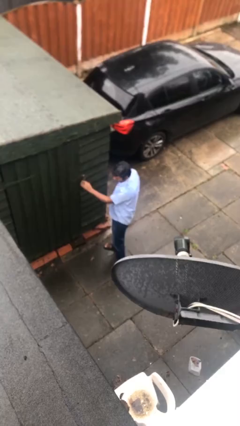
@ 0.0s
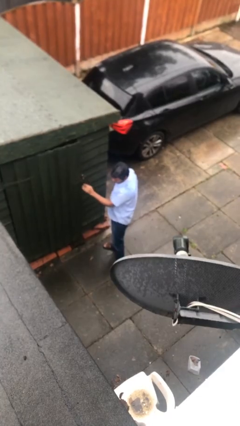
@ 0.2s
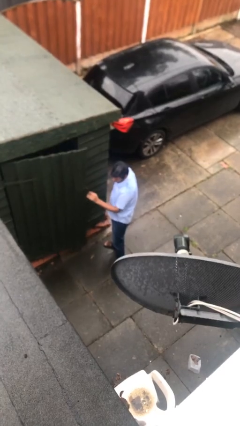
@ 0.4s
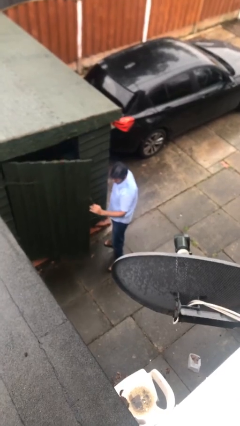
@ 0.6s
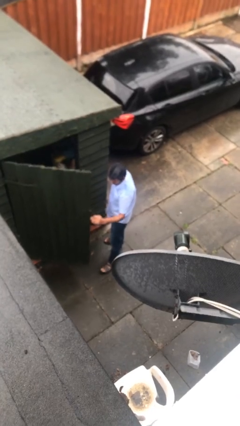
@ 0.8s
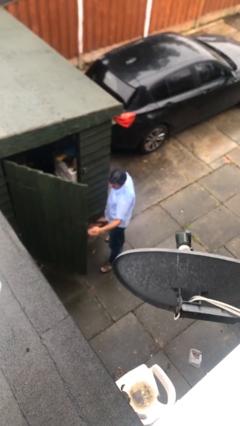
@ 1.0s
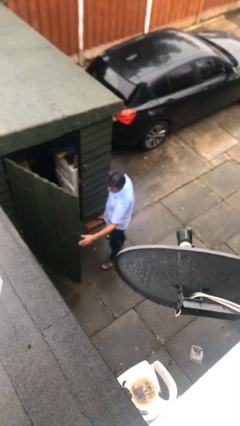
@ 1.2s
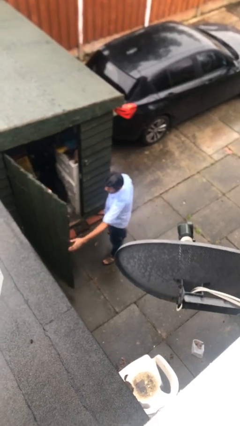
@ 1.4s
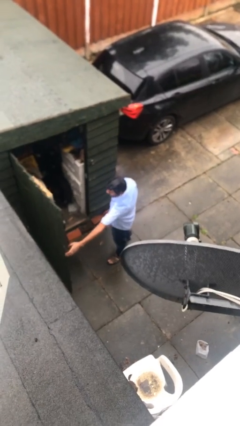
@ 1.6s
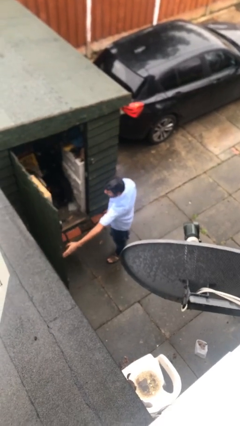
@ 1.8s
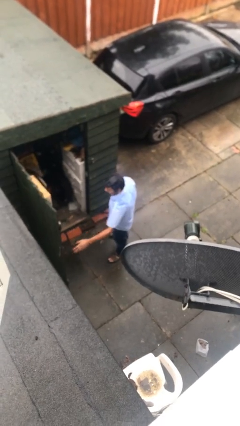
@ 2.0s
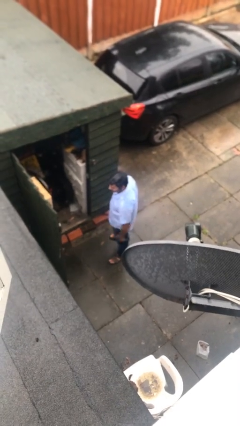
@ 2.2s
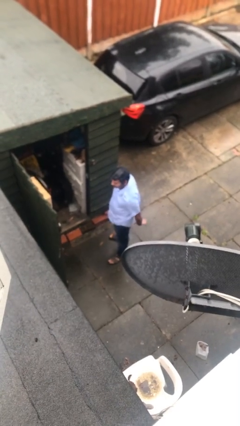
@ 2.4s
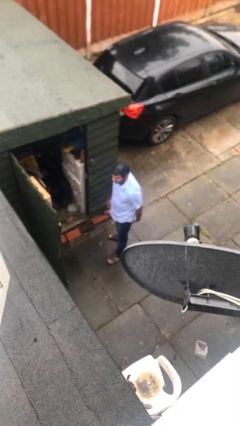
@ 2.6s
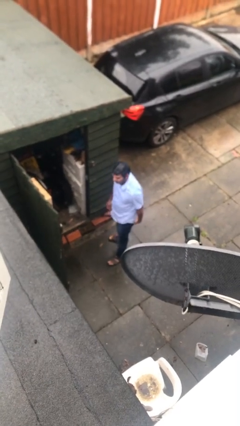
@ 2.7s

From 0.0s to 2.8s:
person opens facility door

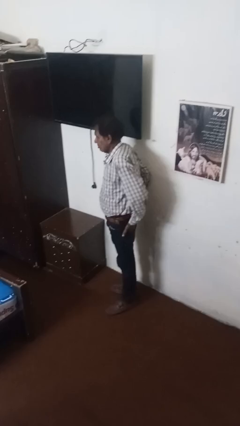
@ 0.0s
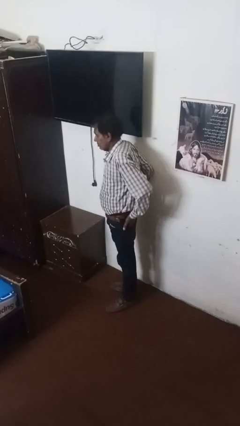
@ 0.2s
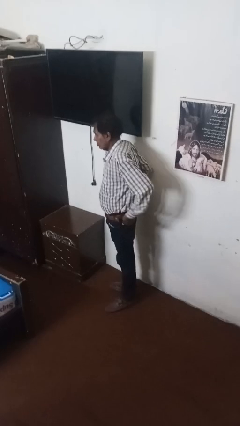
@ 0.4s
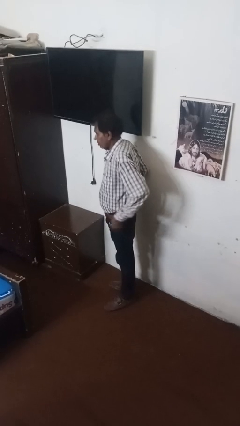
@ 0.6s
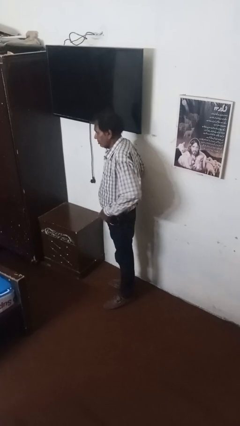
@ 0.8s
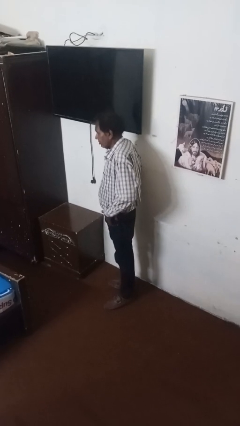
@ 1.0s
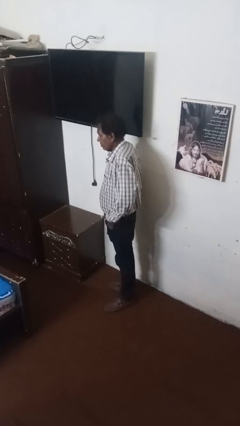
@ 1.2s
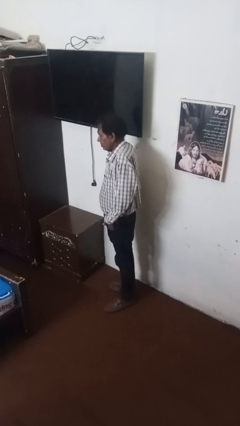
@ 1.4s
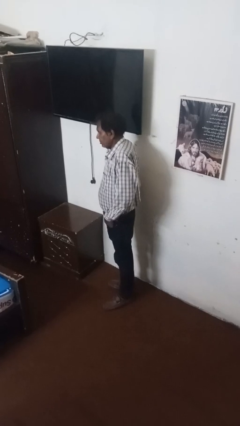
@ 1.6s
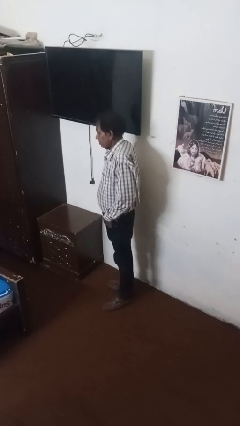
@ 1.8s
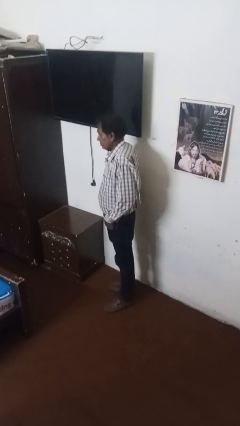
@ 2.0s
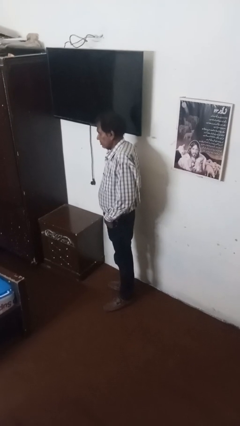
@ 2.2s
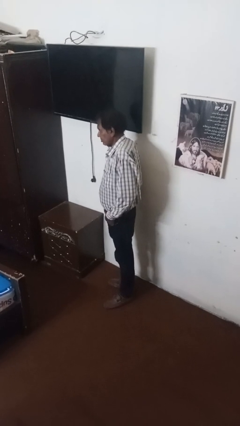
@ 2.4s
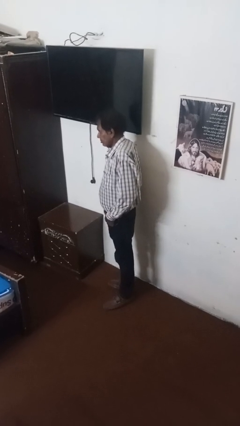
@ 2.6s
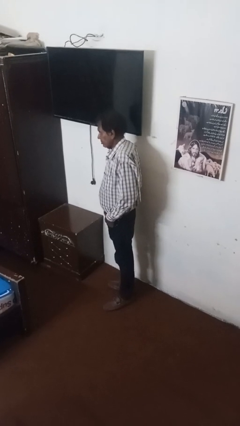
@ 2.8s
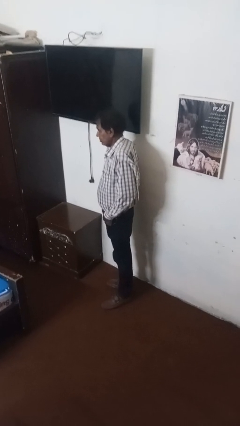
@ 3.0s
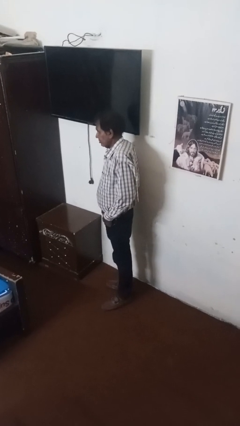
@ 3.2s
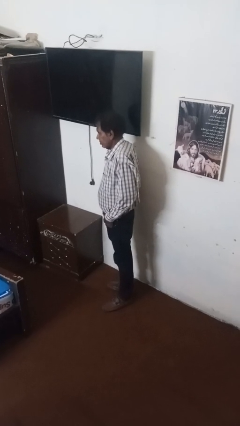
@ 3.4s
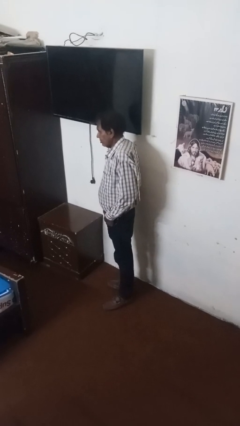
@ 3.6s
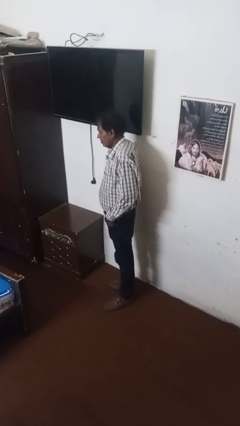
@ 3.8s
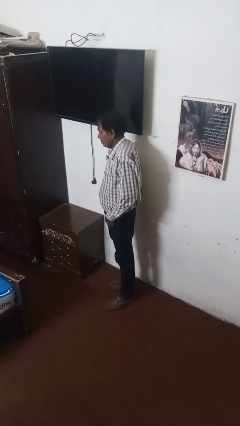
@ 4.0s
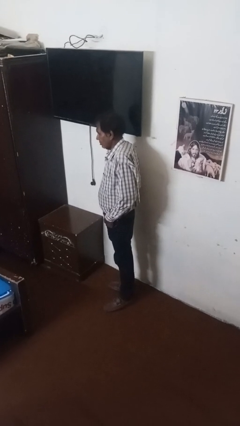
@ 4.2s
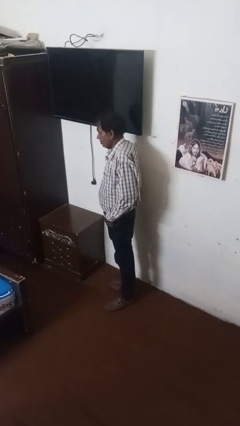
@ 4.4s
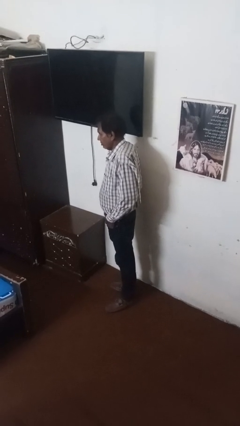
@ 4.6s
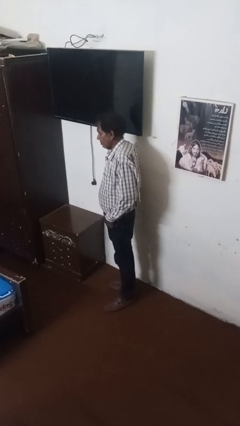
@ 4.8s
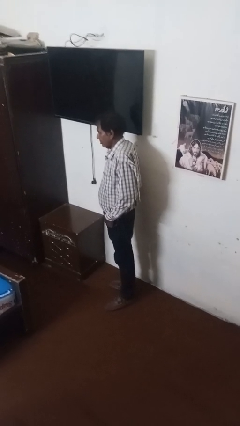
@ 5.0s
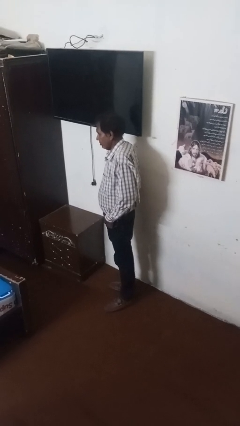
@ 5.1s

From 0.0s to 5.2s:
person puts hands in back pockets

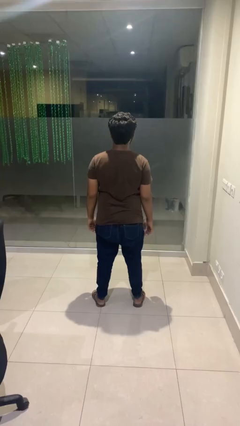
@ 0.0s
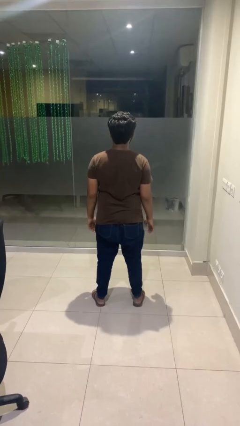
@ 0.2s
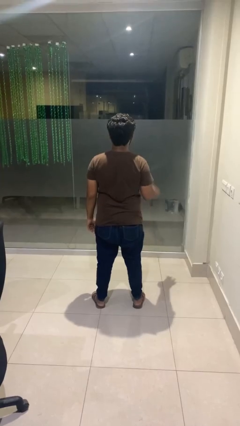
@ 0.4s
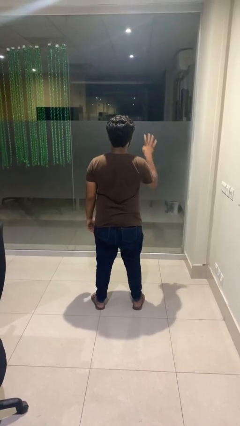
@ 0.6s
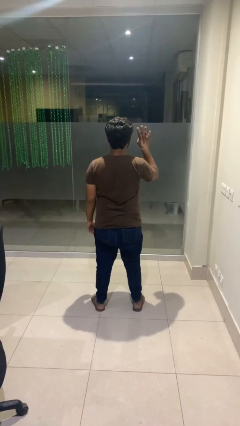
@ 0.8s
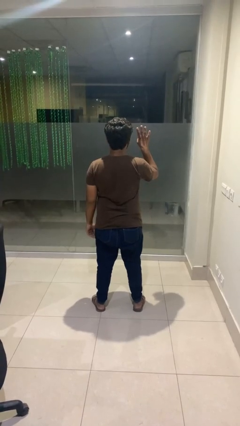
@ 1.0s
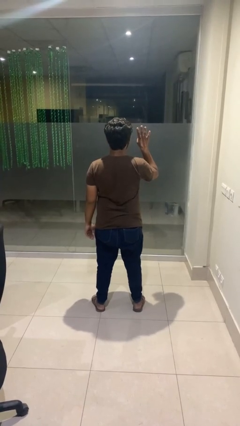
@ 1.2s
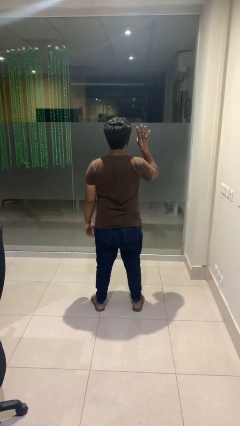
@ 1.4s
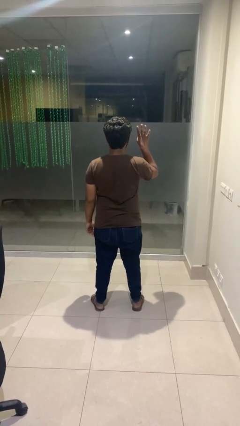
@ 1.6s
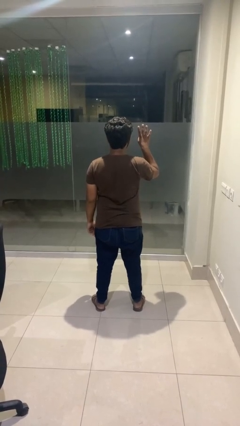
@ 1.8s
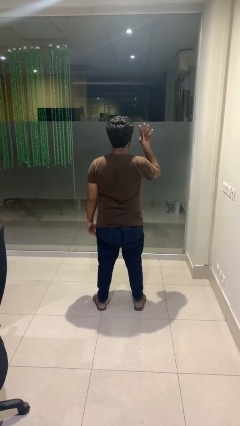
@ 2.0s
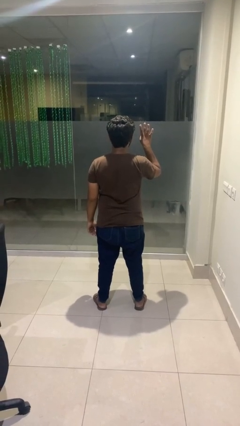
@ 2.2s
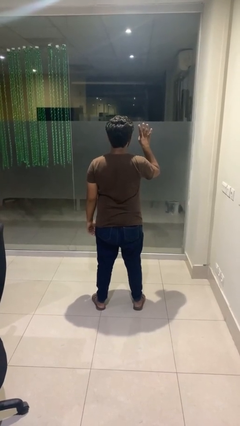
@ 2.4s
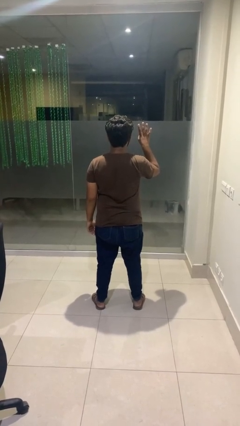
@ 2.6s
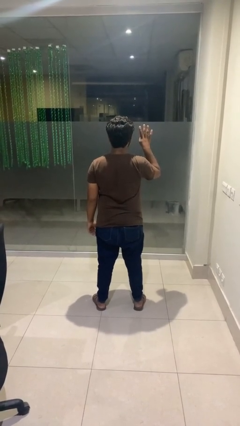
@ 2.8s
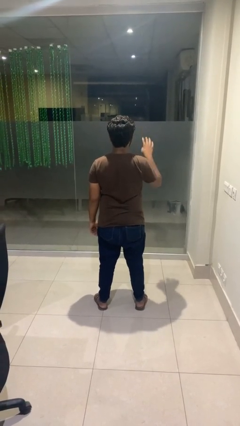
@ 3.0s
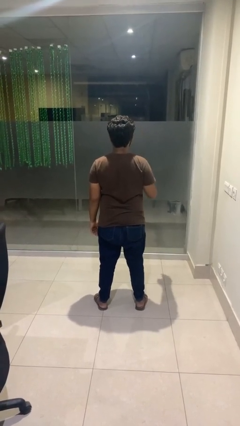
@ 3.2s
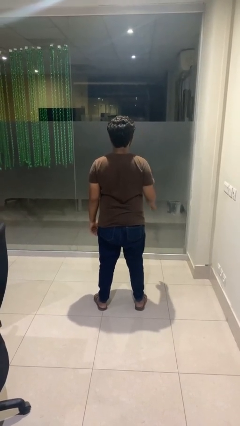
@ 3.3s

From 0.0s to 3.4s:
person gestures number four

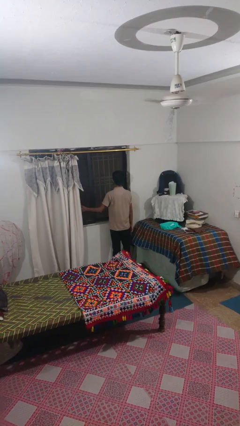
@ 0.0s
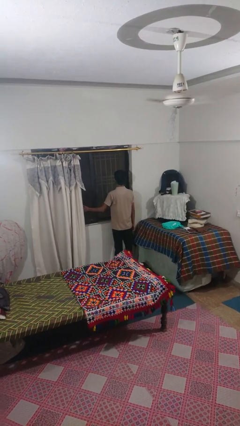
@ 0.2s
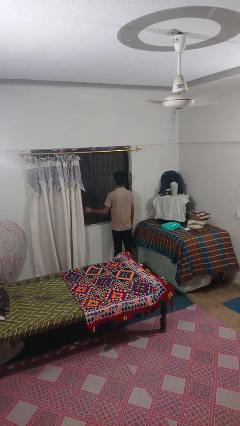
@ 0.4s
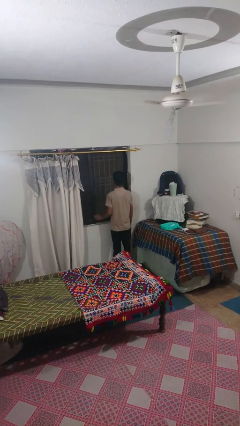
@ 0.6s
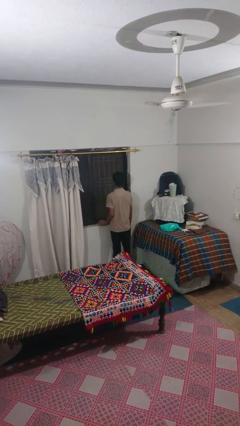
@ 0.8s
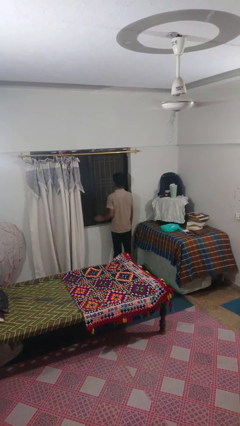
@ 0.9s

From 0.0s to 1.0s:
person opens sliding door

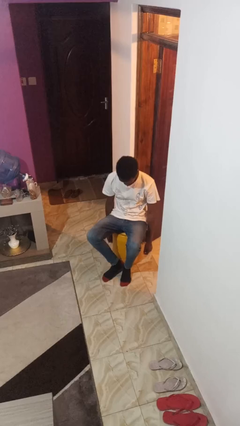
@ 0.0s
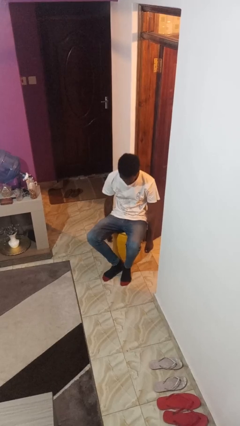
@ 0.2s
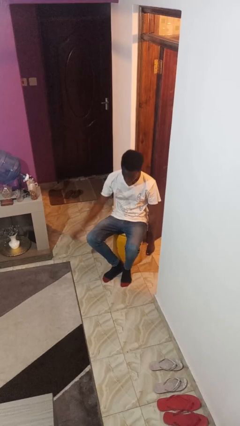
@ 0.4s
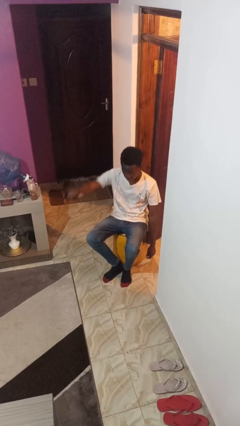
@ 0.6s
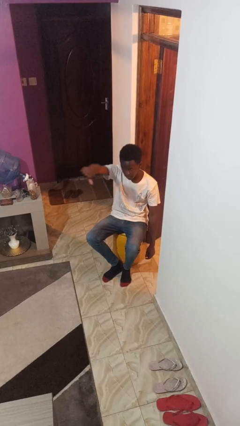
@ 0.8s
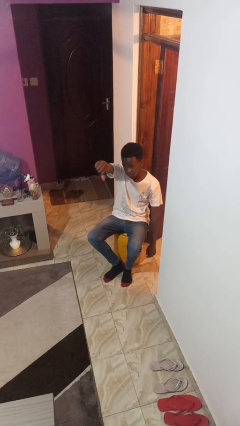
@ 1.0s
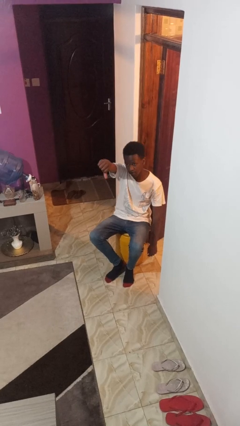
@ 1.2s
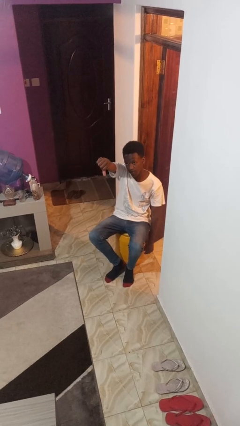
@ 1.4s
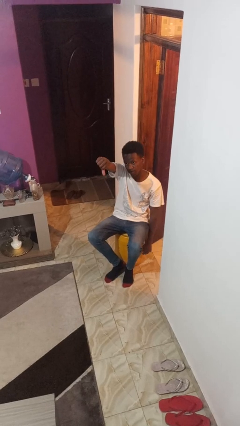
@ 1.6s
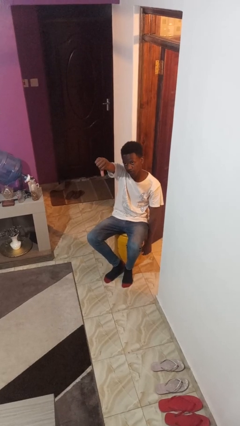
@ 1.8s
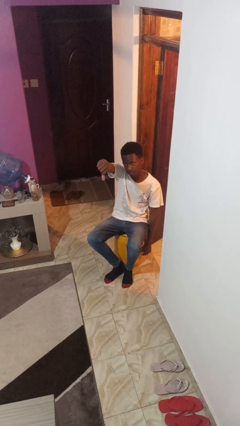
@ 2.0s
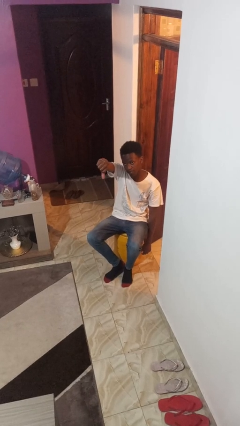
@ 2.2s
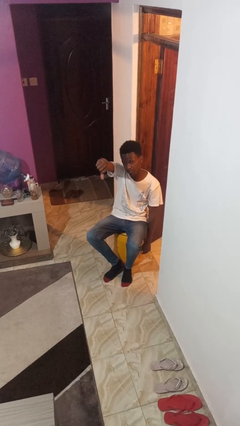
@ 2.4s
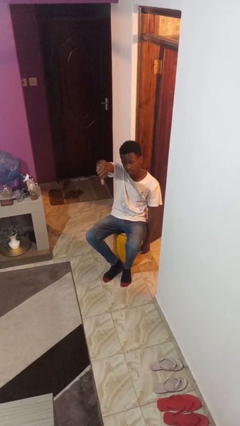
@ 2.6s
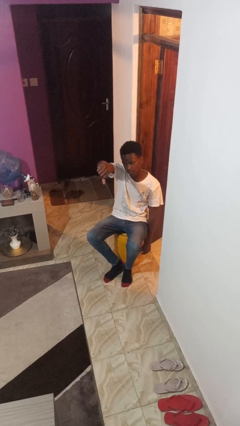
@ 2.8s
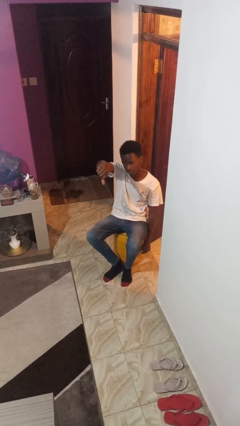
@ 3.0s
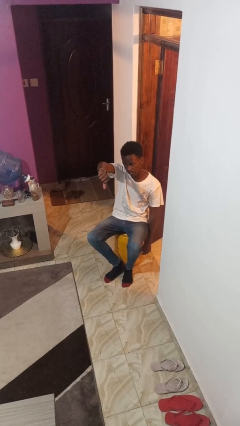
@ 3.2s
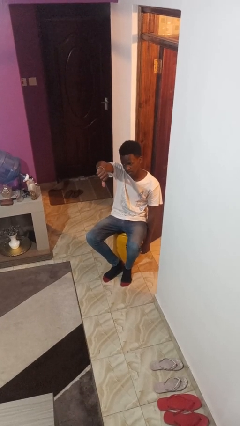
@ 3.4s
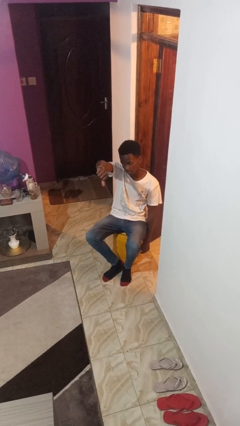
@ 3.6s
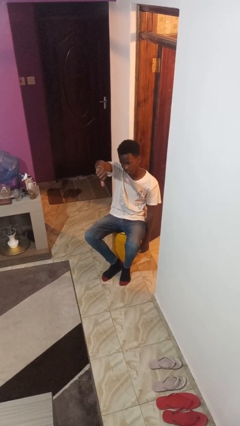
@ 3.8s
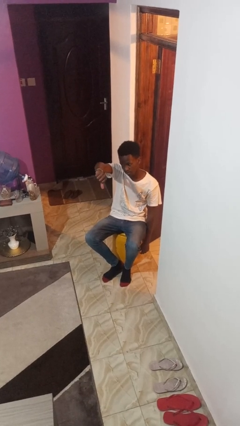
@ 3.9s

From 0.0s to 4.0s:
person gestures thumbs down

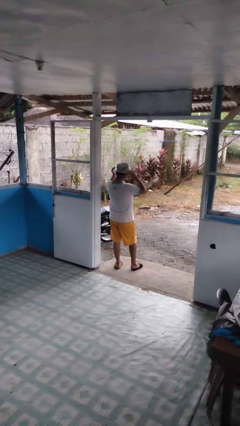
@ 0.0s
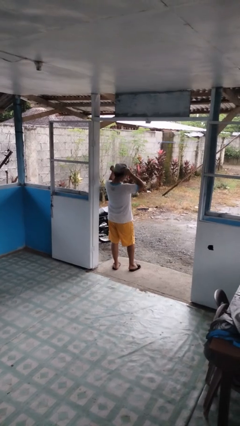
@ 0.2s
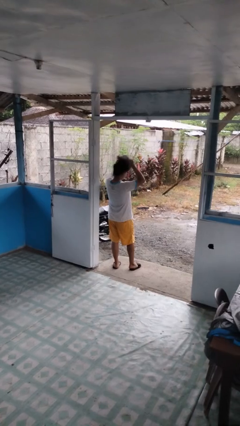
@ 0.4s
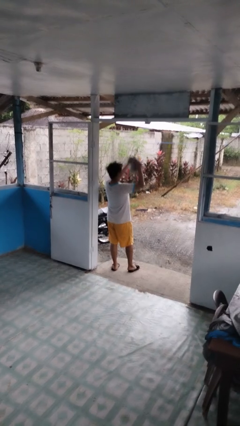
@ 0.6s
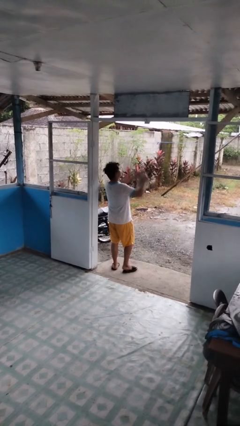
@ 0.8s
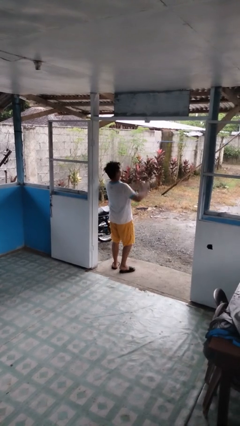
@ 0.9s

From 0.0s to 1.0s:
person takes off hat

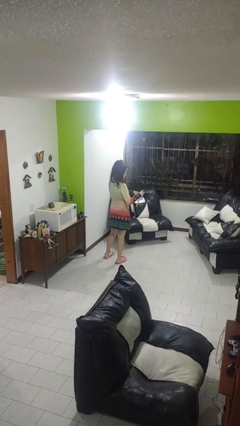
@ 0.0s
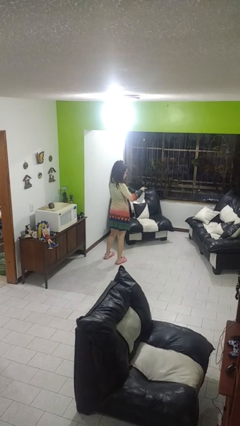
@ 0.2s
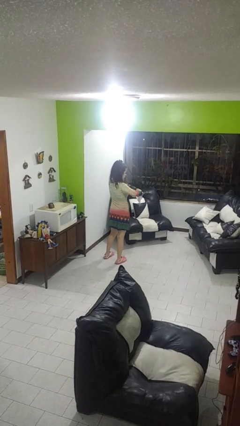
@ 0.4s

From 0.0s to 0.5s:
person tears paper
